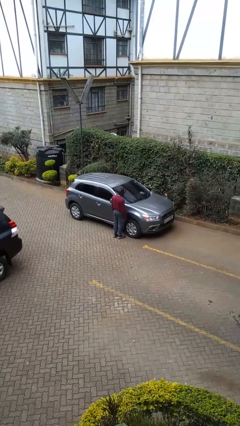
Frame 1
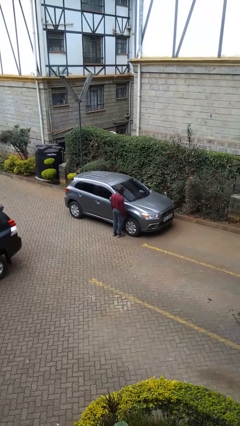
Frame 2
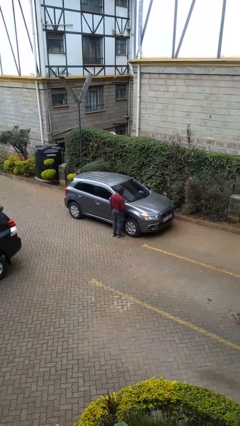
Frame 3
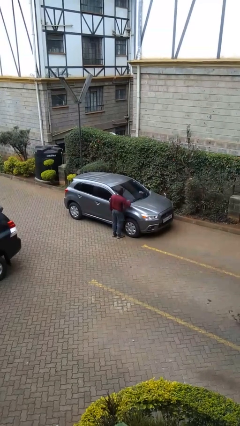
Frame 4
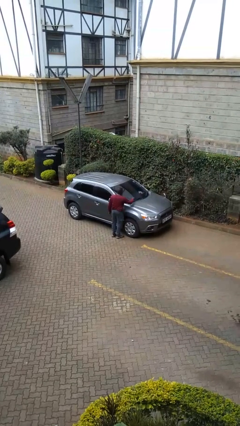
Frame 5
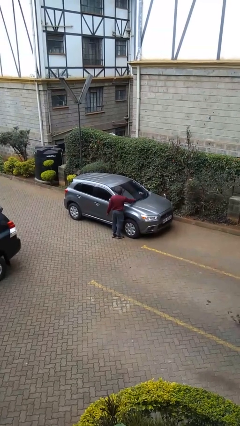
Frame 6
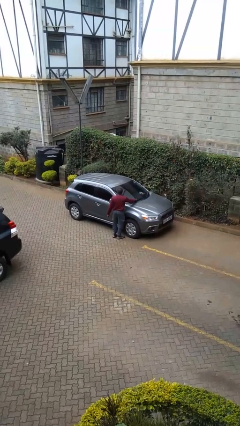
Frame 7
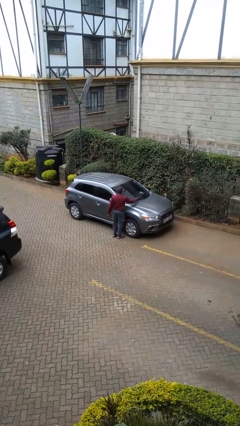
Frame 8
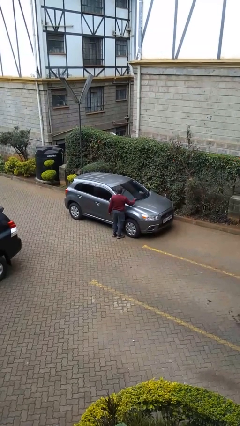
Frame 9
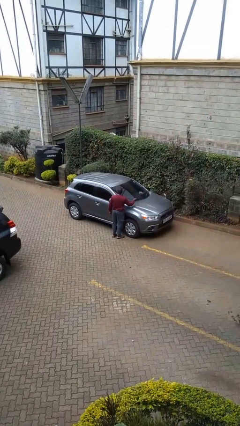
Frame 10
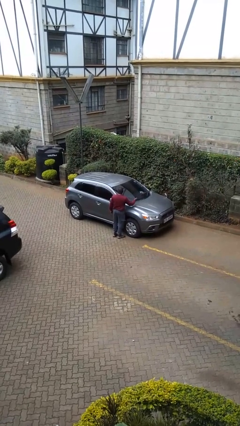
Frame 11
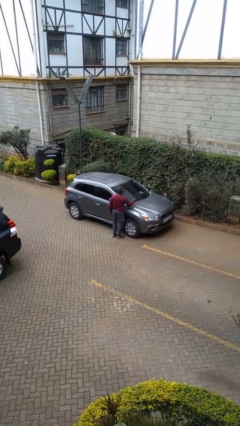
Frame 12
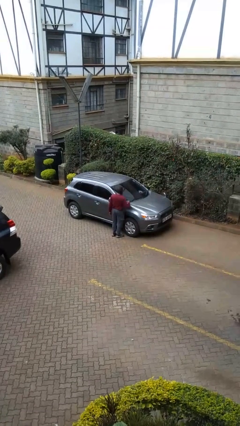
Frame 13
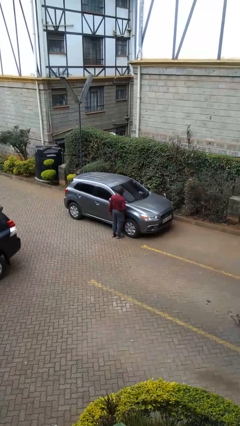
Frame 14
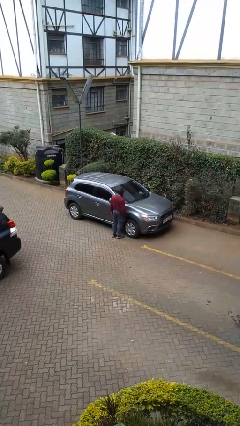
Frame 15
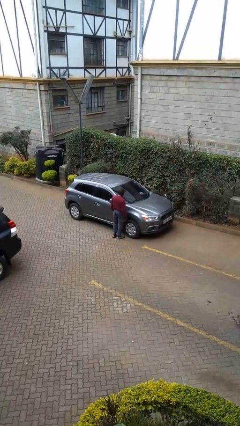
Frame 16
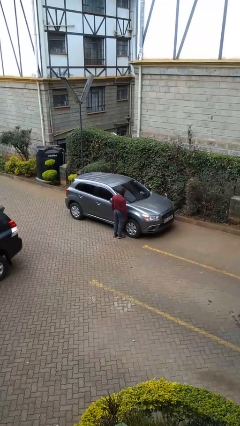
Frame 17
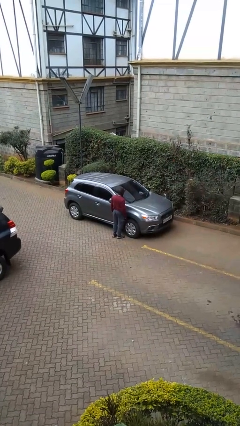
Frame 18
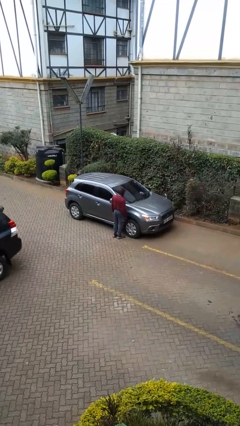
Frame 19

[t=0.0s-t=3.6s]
person flips up car wipers

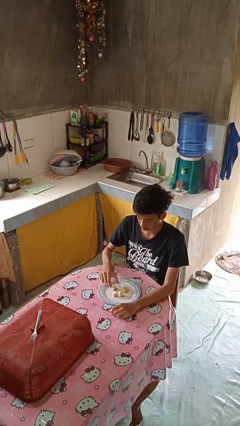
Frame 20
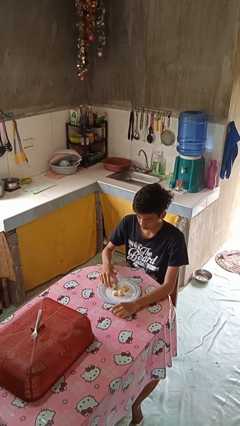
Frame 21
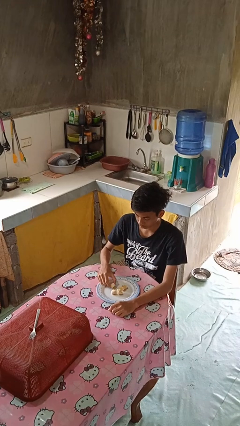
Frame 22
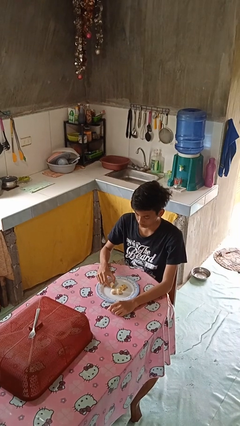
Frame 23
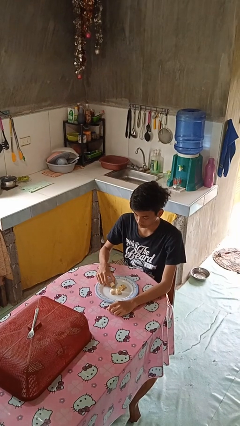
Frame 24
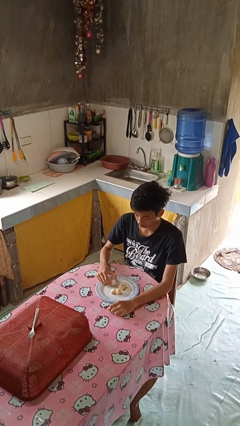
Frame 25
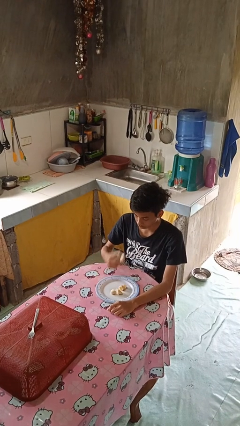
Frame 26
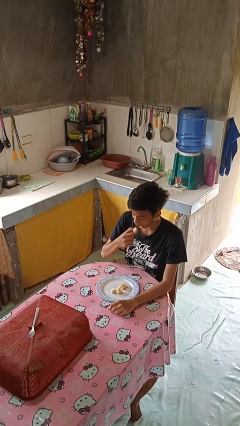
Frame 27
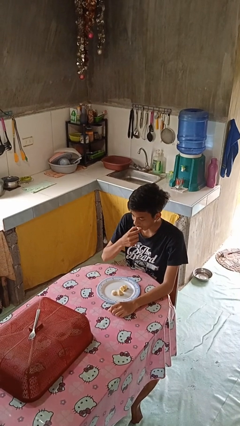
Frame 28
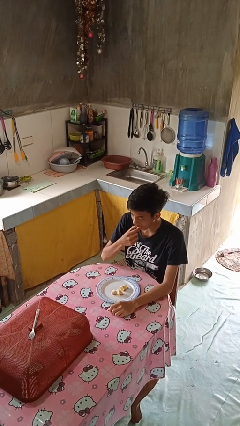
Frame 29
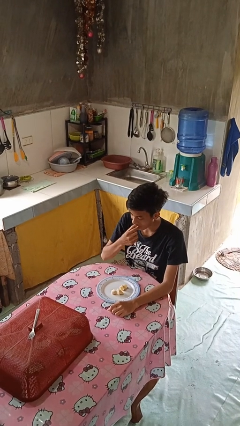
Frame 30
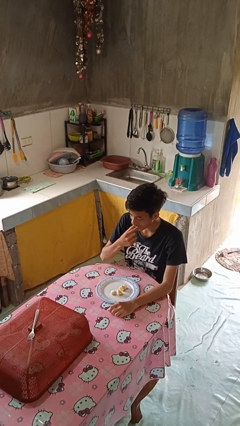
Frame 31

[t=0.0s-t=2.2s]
person eats with hands

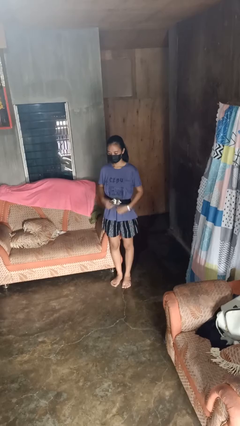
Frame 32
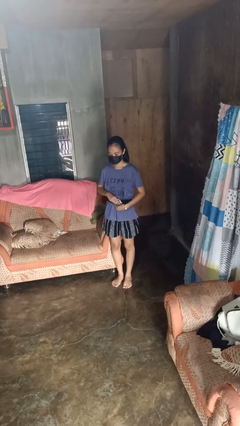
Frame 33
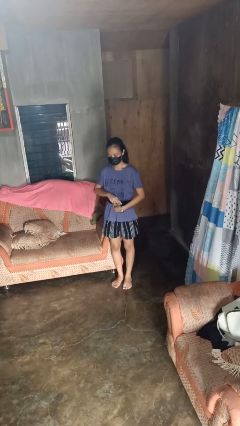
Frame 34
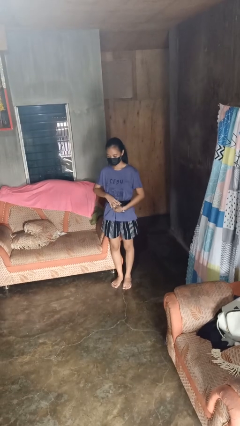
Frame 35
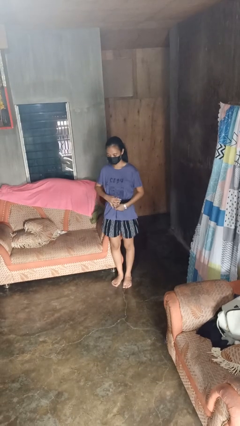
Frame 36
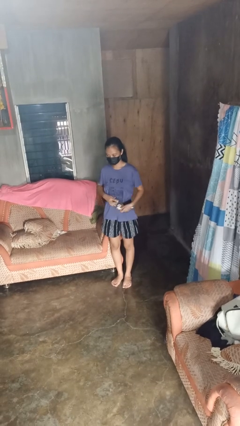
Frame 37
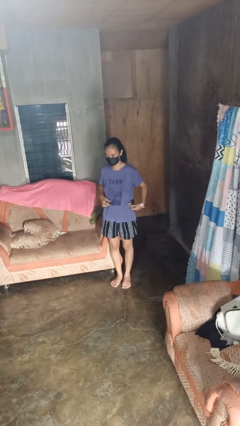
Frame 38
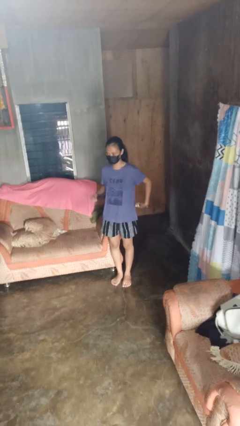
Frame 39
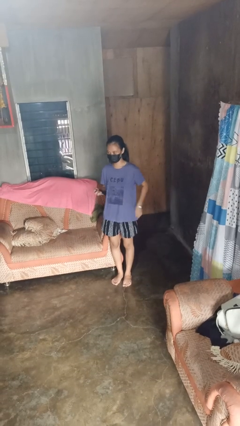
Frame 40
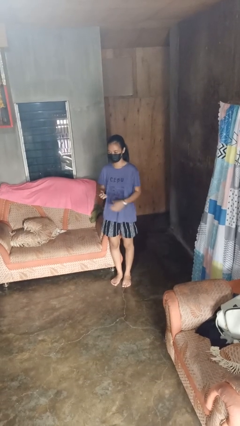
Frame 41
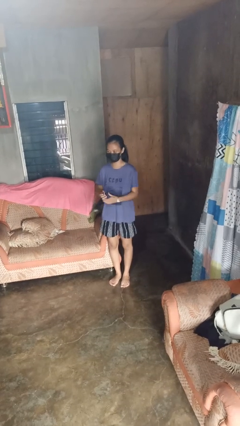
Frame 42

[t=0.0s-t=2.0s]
person takes off belt

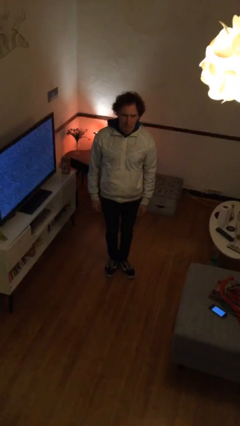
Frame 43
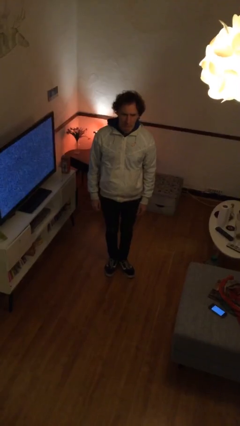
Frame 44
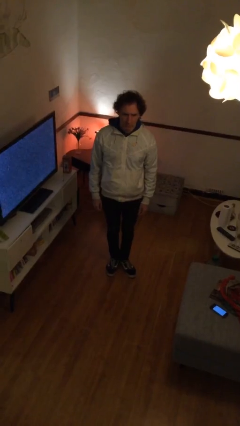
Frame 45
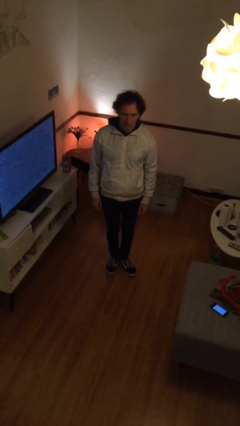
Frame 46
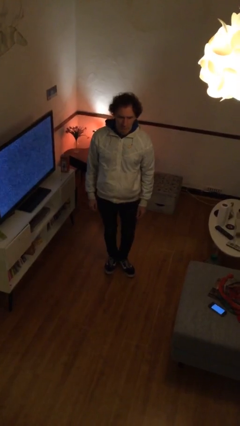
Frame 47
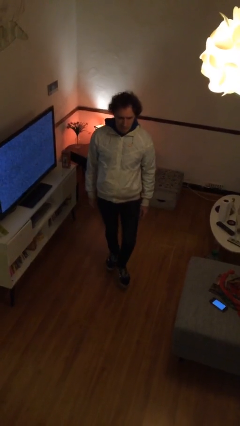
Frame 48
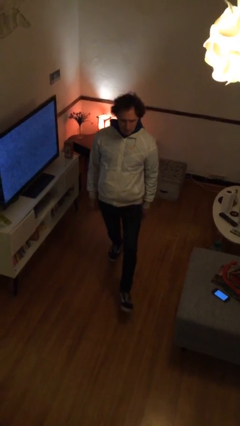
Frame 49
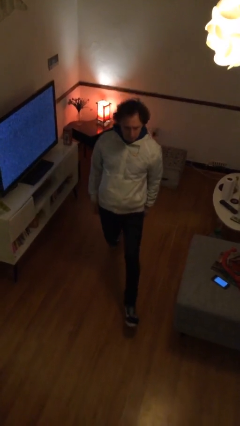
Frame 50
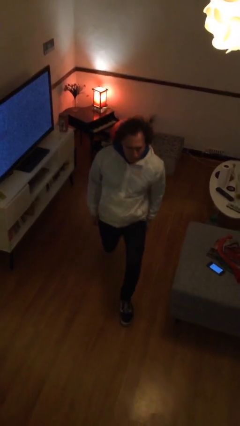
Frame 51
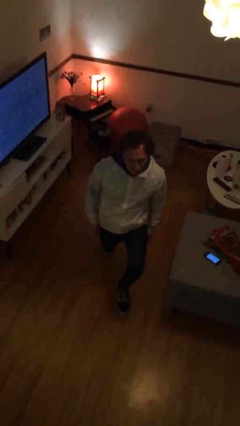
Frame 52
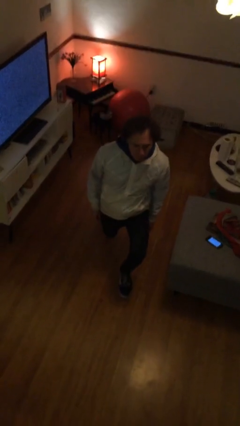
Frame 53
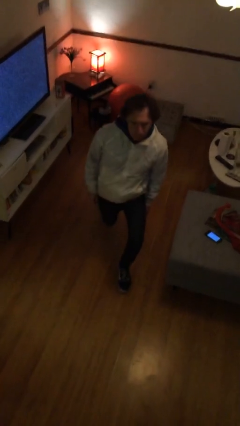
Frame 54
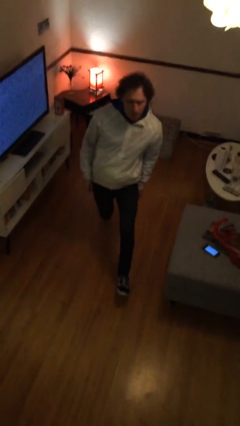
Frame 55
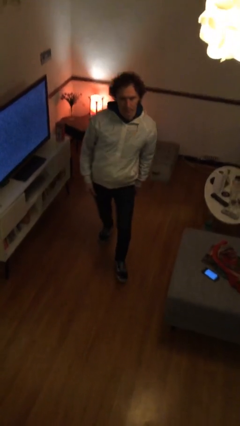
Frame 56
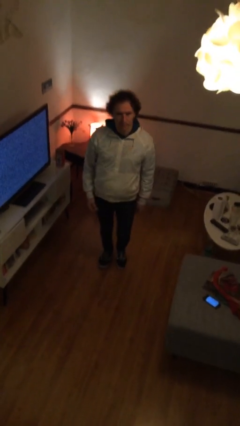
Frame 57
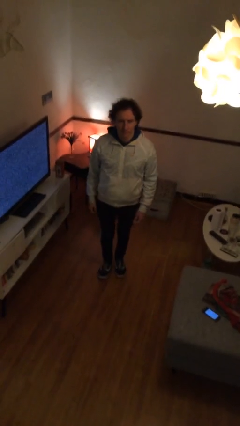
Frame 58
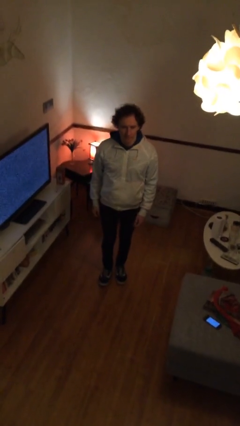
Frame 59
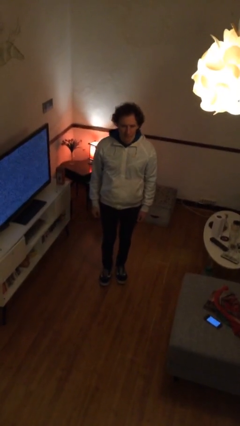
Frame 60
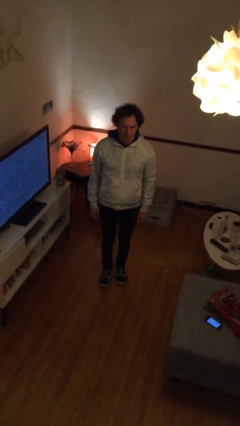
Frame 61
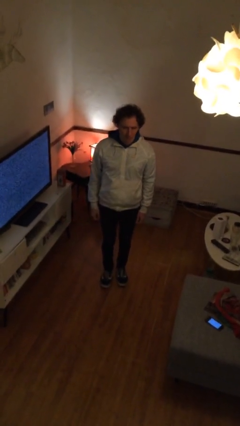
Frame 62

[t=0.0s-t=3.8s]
person exercises with lunges

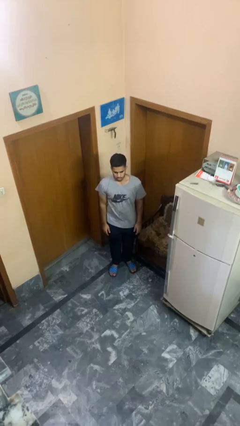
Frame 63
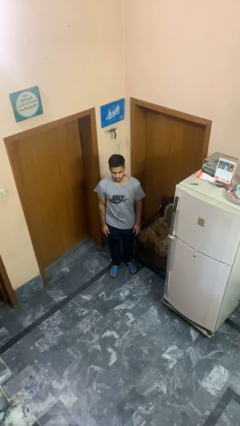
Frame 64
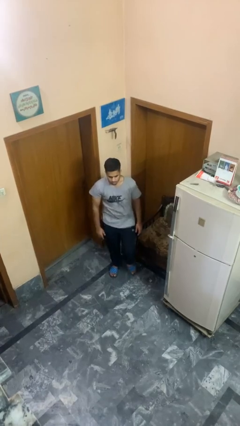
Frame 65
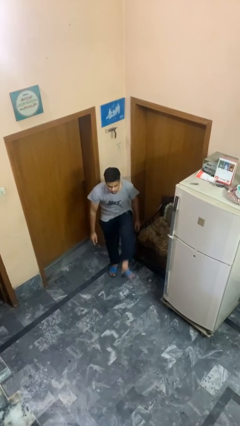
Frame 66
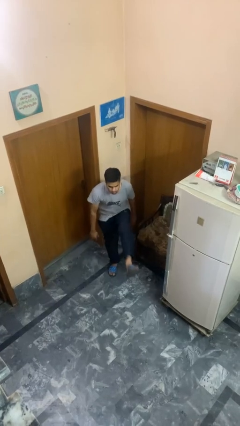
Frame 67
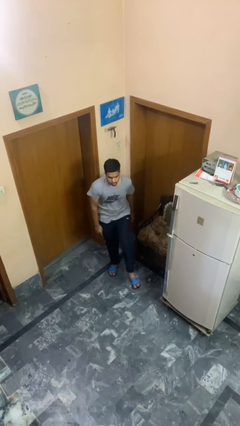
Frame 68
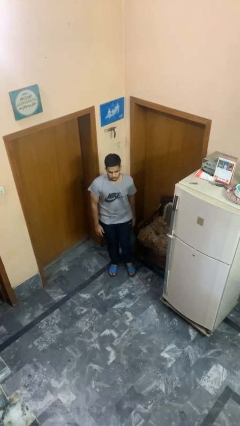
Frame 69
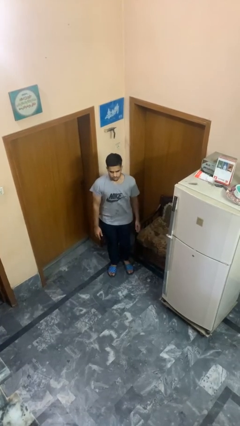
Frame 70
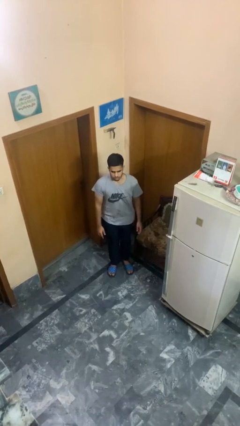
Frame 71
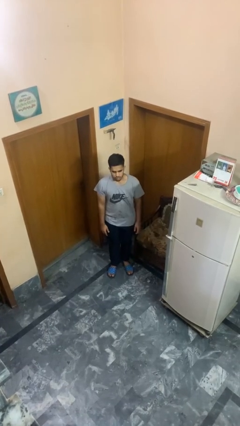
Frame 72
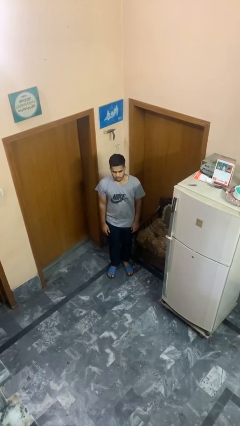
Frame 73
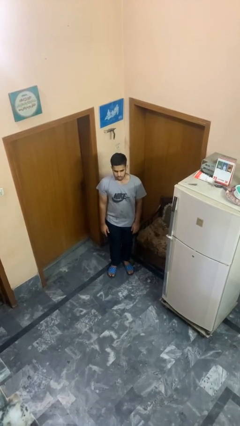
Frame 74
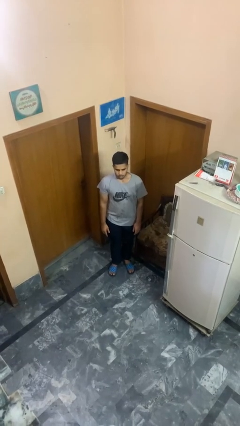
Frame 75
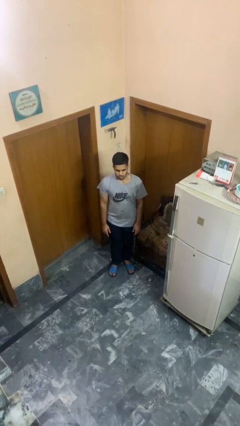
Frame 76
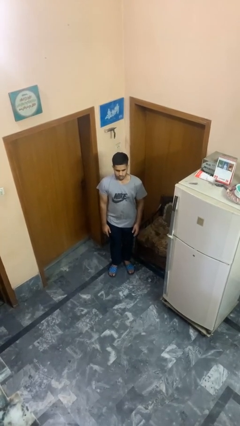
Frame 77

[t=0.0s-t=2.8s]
person karate kicks

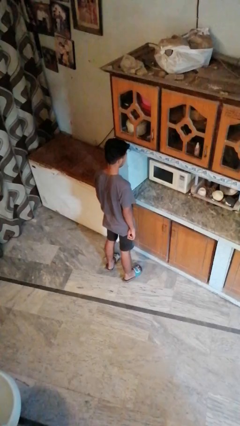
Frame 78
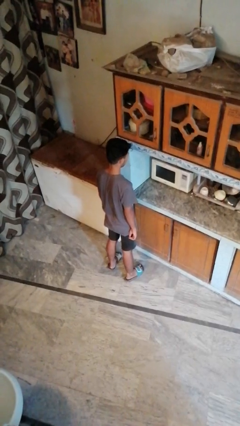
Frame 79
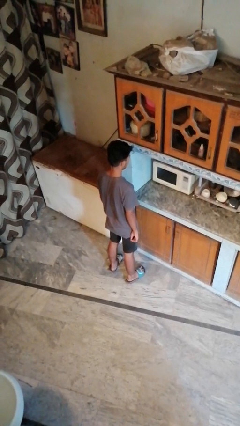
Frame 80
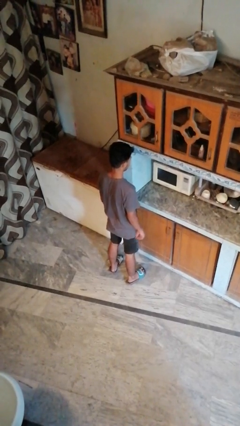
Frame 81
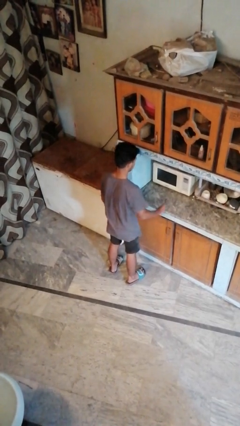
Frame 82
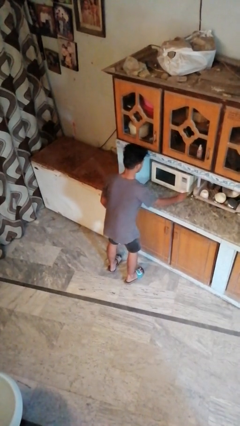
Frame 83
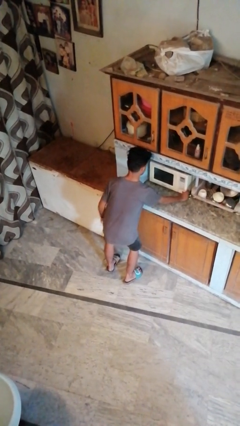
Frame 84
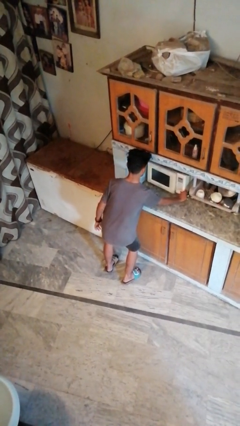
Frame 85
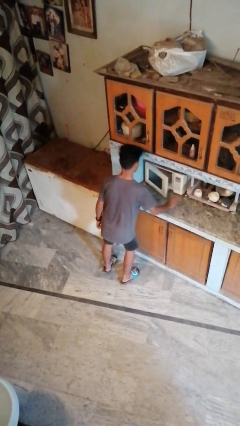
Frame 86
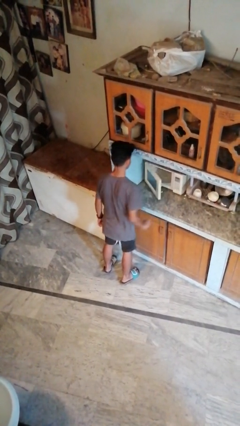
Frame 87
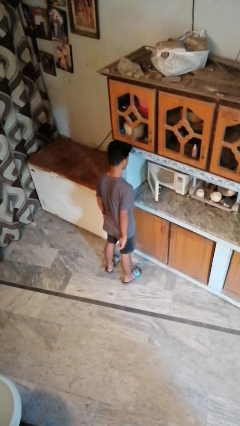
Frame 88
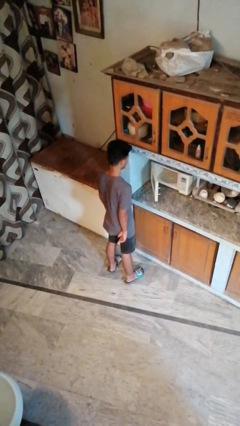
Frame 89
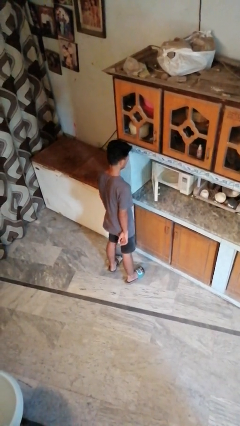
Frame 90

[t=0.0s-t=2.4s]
person opens oven door

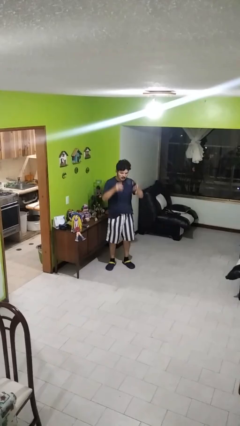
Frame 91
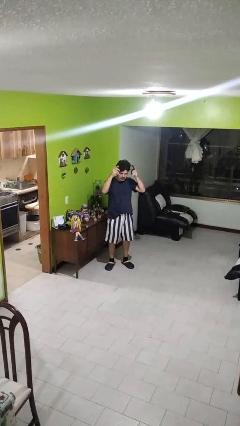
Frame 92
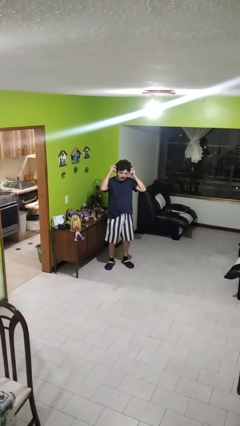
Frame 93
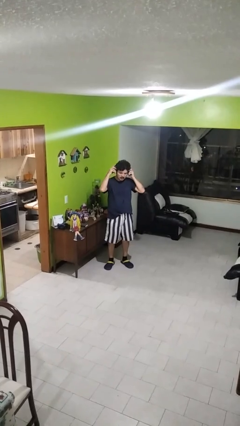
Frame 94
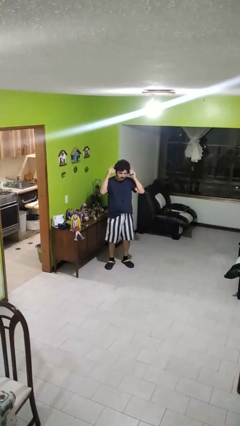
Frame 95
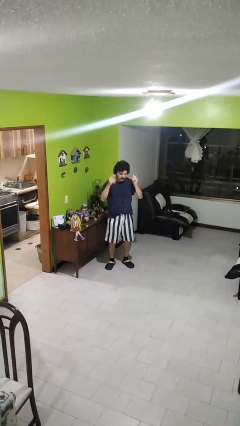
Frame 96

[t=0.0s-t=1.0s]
person puts on headphones
